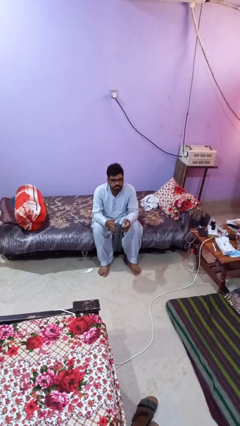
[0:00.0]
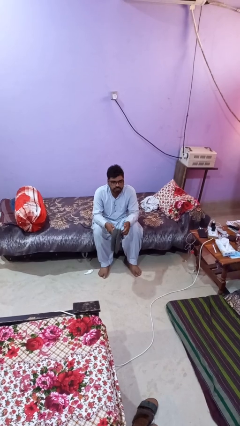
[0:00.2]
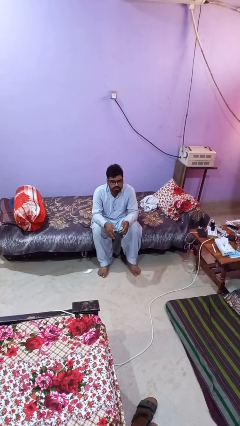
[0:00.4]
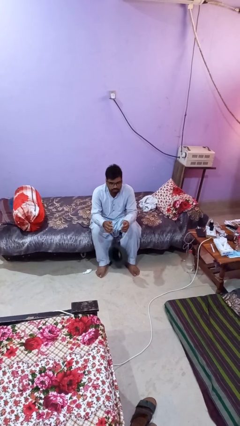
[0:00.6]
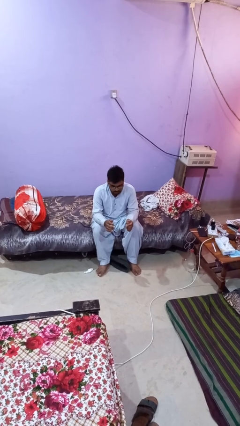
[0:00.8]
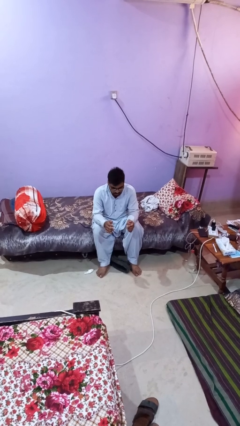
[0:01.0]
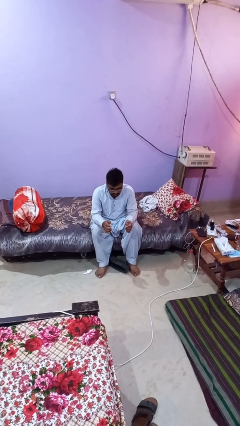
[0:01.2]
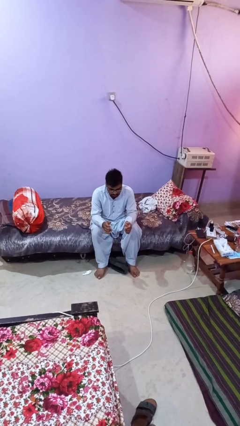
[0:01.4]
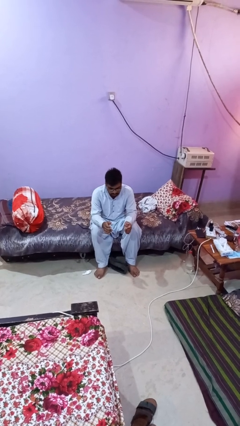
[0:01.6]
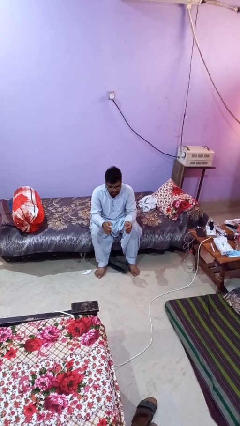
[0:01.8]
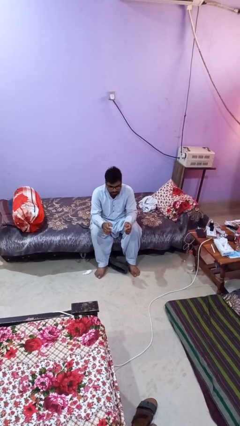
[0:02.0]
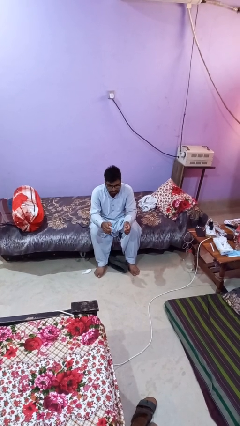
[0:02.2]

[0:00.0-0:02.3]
person drops object

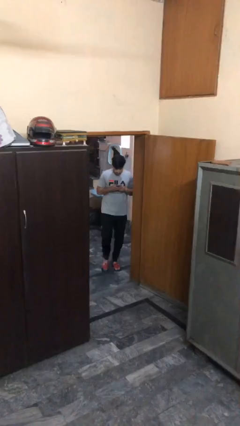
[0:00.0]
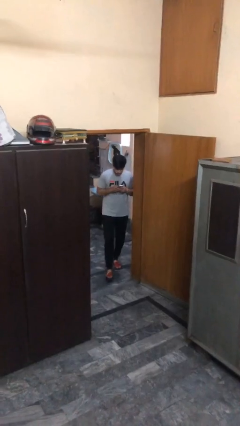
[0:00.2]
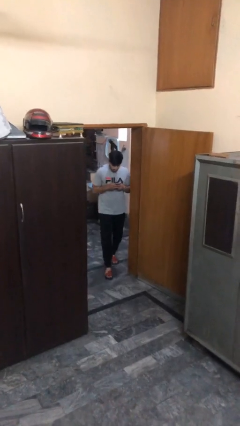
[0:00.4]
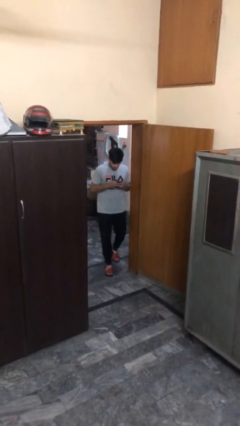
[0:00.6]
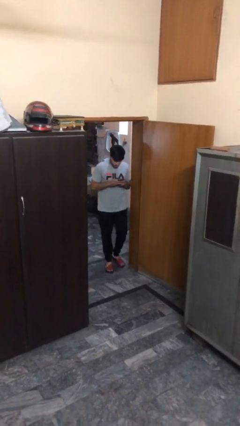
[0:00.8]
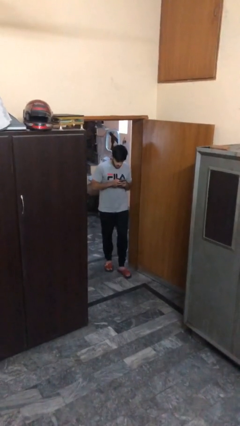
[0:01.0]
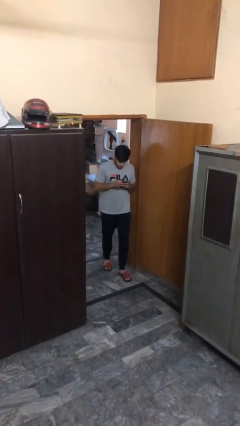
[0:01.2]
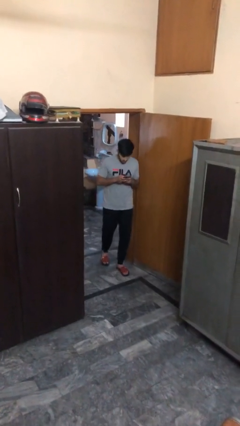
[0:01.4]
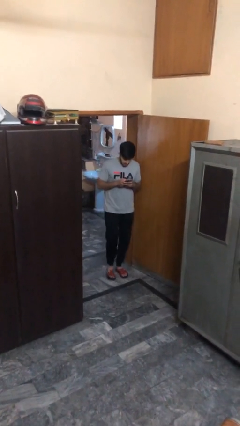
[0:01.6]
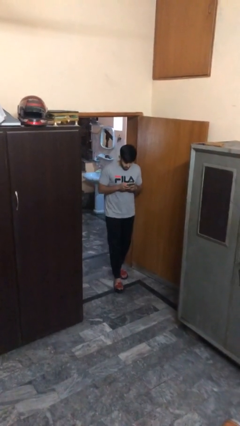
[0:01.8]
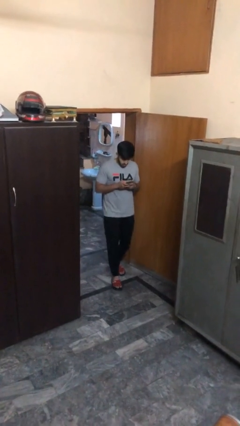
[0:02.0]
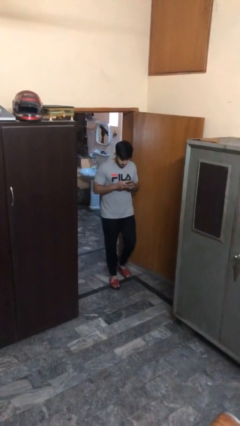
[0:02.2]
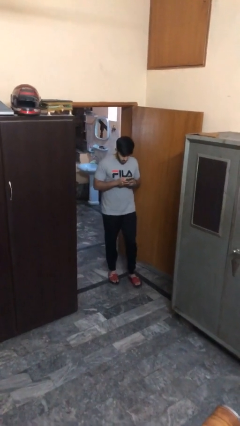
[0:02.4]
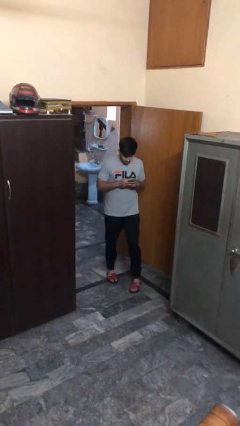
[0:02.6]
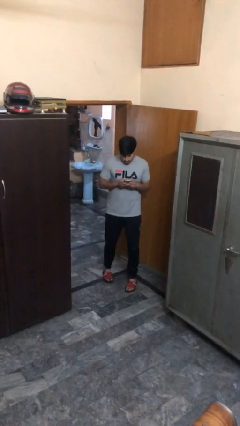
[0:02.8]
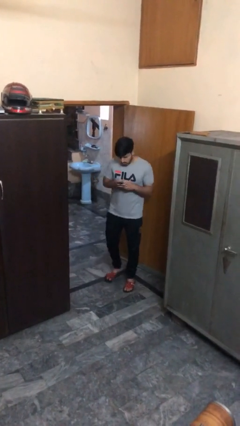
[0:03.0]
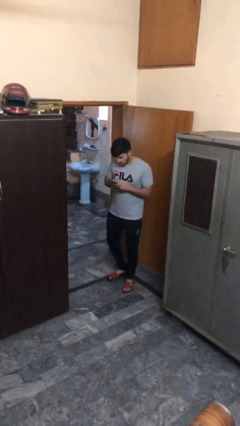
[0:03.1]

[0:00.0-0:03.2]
person enters scene through structure

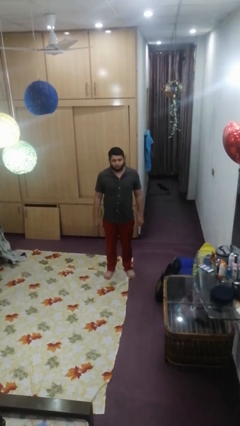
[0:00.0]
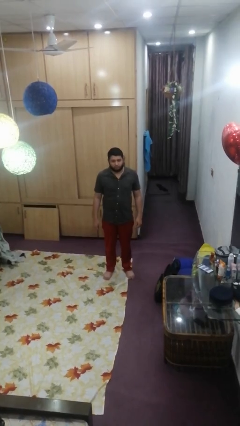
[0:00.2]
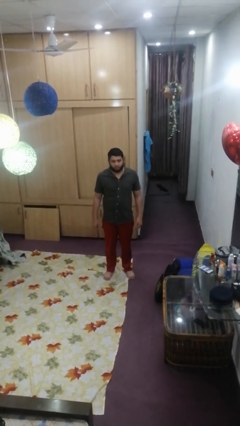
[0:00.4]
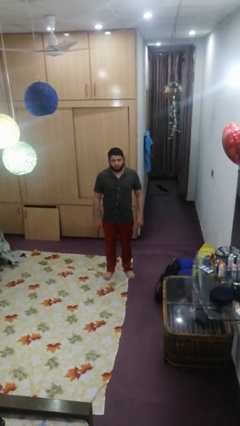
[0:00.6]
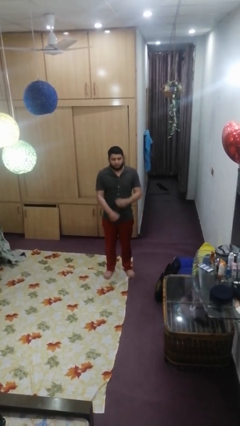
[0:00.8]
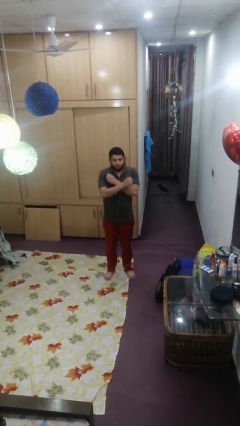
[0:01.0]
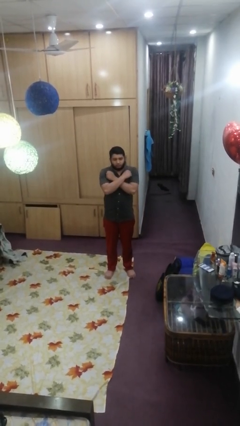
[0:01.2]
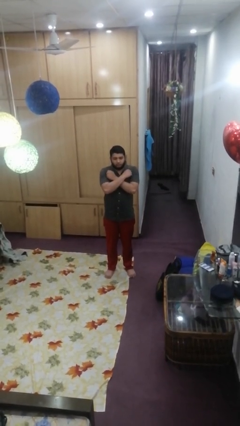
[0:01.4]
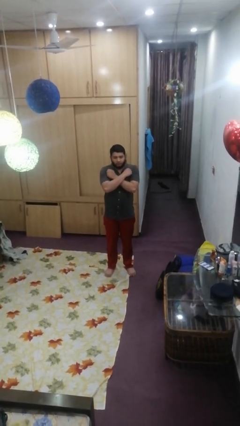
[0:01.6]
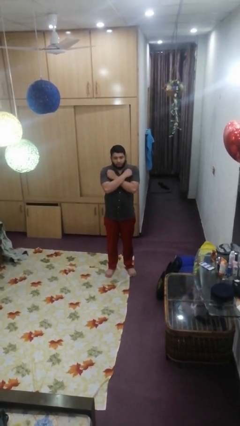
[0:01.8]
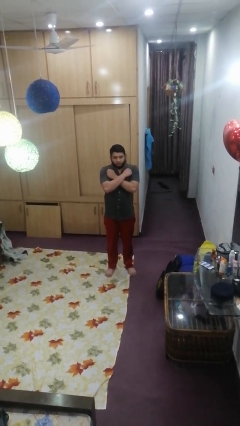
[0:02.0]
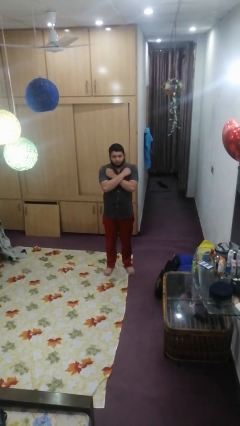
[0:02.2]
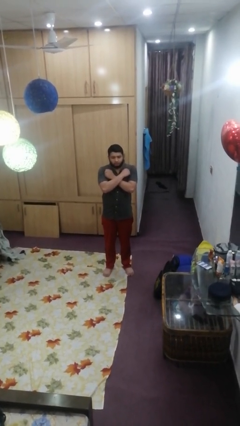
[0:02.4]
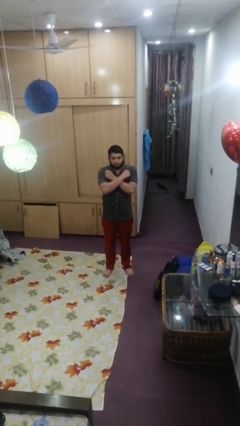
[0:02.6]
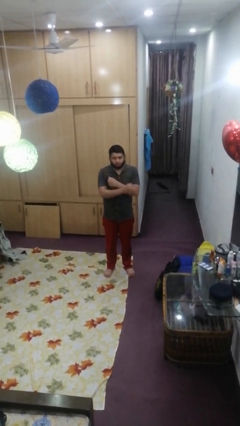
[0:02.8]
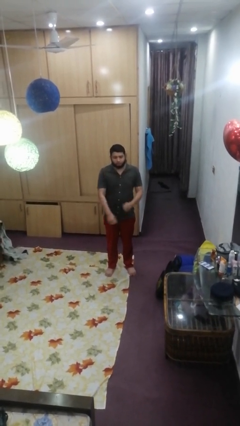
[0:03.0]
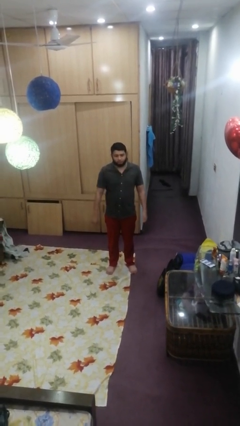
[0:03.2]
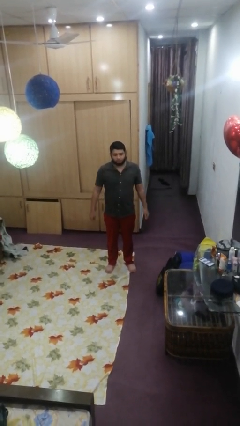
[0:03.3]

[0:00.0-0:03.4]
person crosses arms

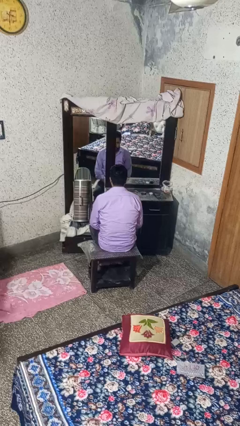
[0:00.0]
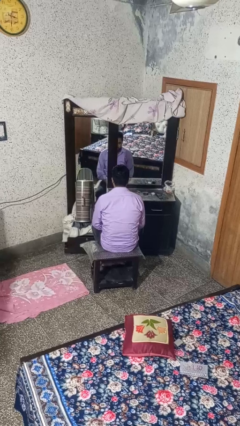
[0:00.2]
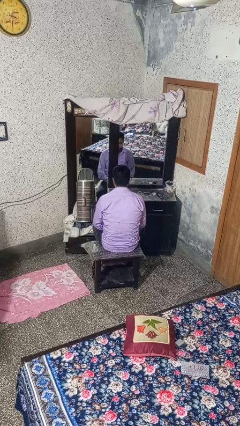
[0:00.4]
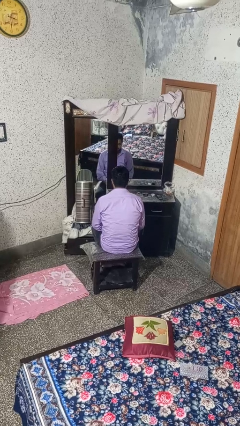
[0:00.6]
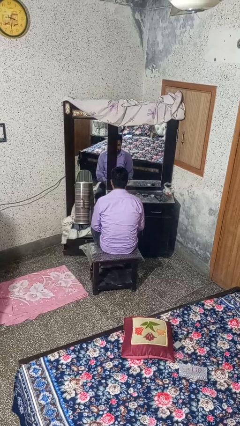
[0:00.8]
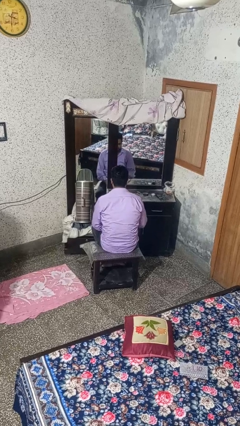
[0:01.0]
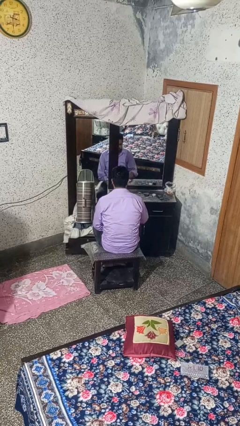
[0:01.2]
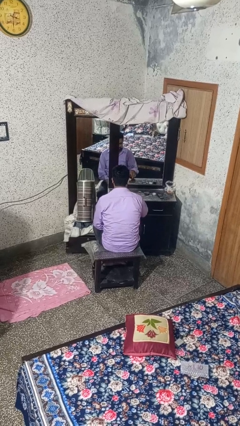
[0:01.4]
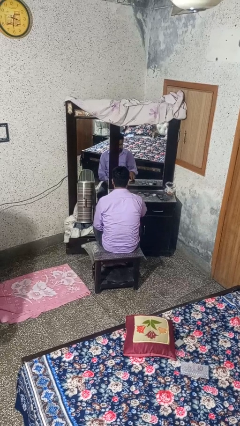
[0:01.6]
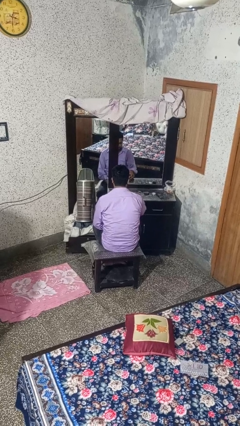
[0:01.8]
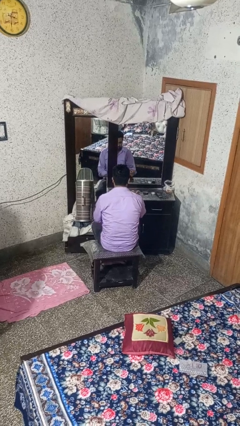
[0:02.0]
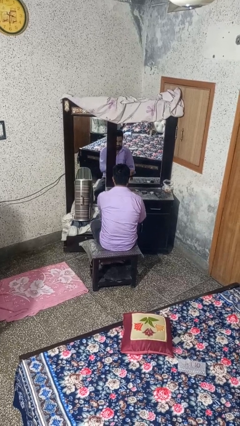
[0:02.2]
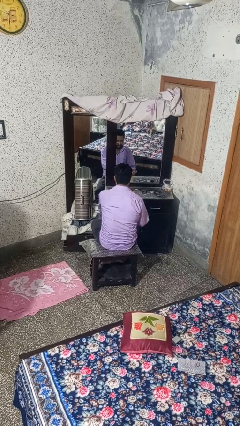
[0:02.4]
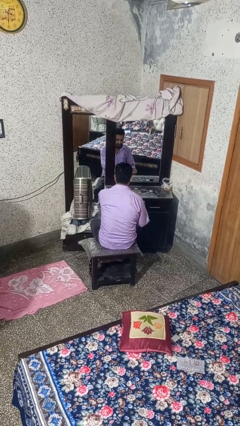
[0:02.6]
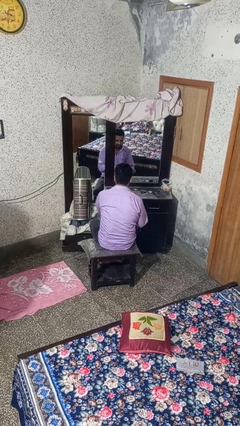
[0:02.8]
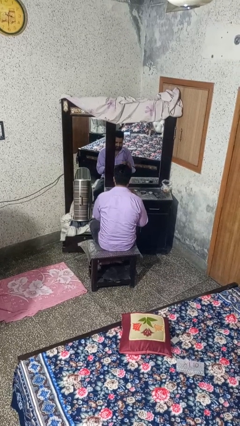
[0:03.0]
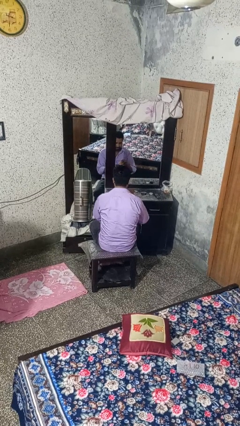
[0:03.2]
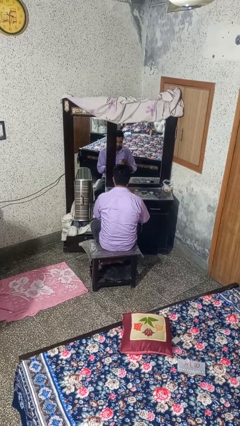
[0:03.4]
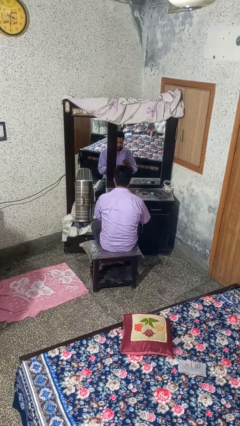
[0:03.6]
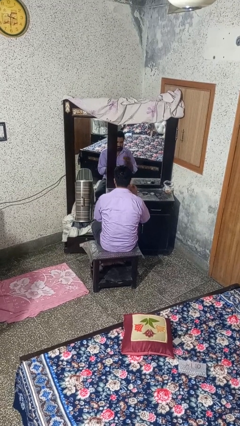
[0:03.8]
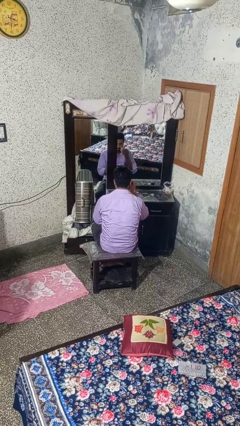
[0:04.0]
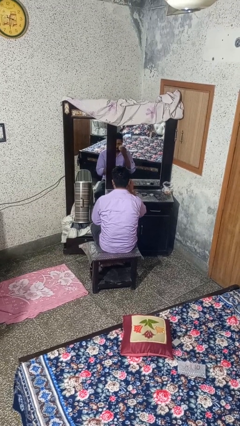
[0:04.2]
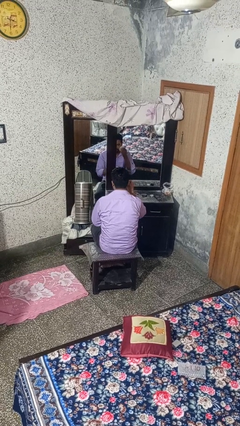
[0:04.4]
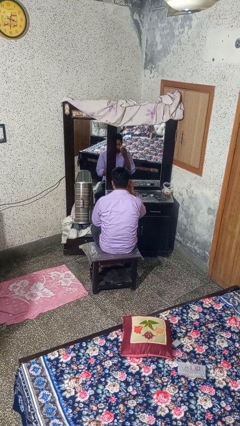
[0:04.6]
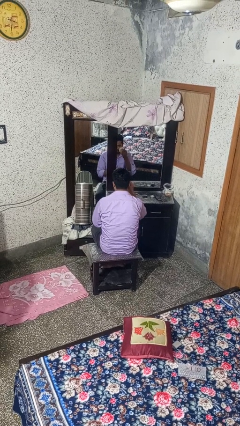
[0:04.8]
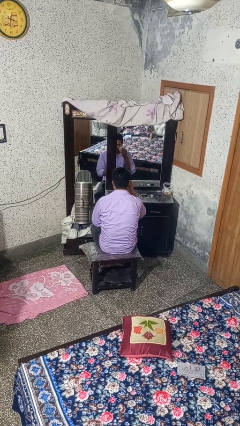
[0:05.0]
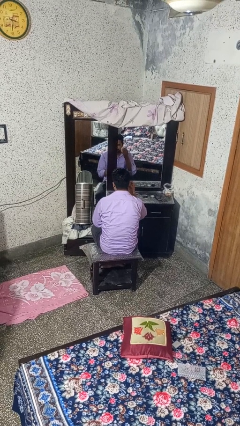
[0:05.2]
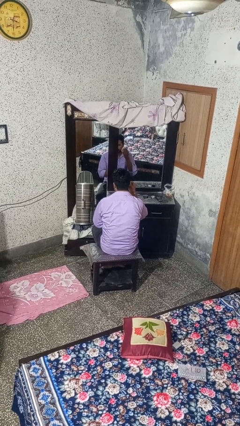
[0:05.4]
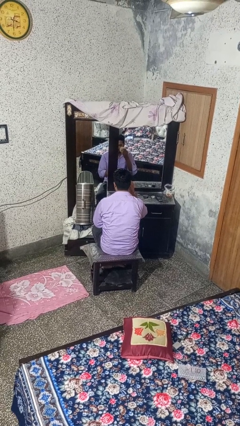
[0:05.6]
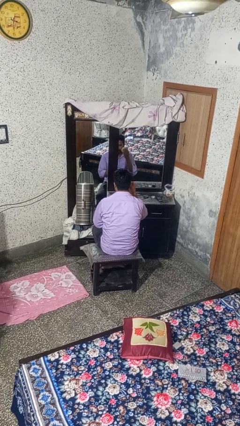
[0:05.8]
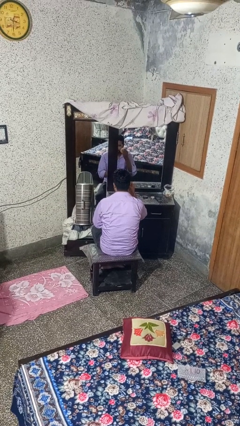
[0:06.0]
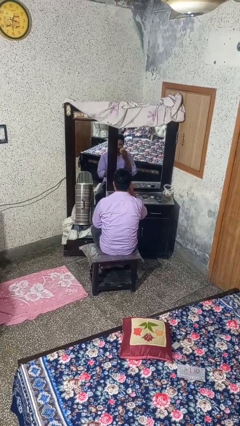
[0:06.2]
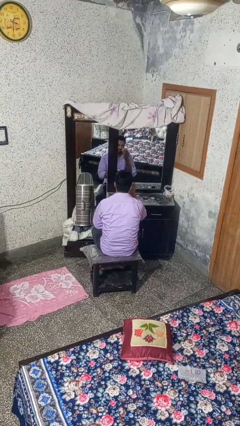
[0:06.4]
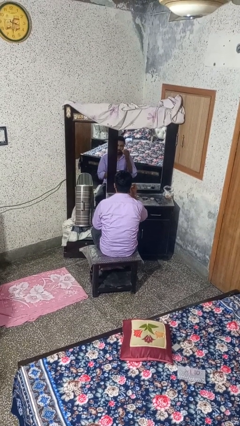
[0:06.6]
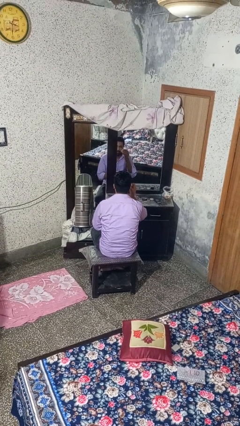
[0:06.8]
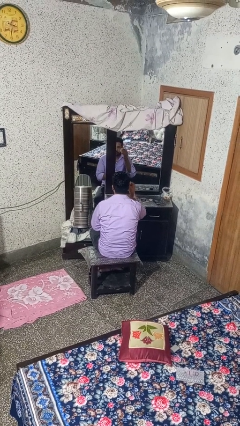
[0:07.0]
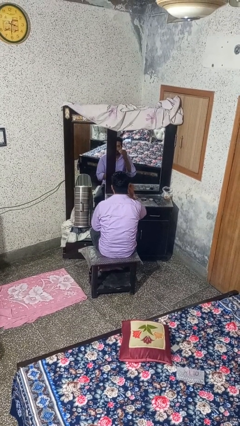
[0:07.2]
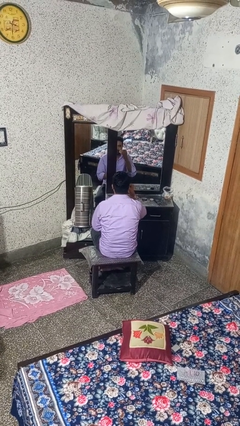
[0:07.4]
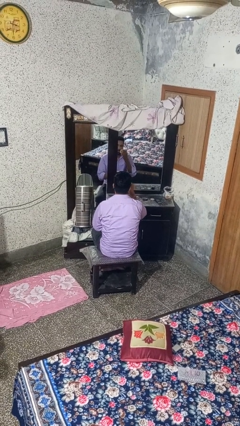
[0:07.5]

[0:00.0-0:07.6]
person applies foundation makeup

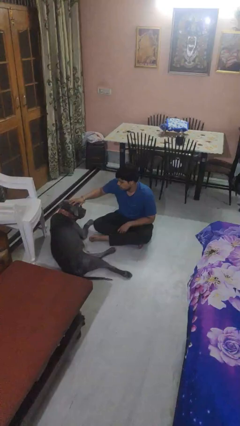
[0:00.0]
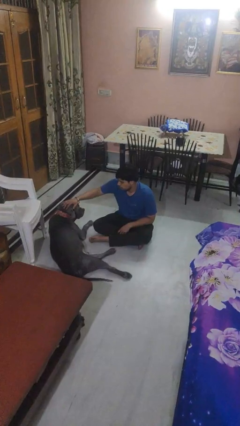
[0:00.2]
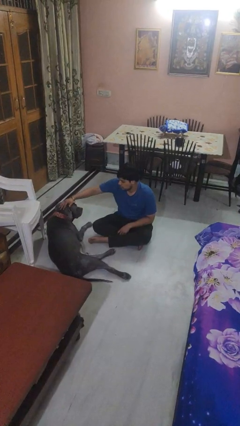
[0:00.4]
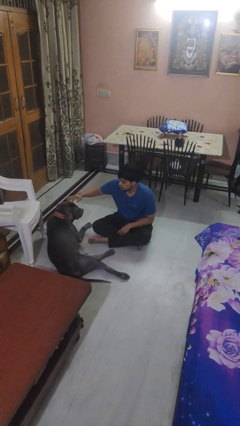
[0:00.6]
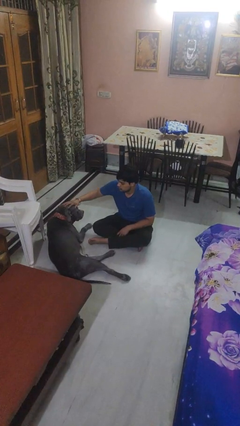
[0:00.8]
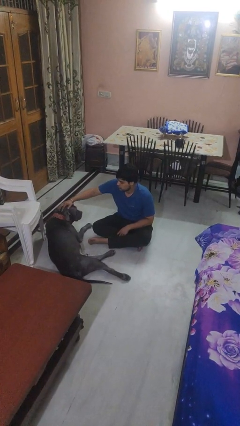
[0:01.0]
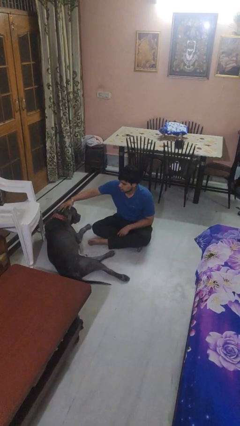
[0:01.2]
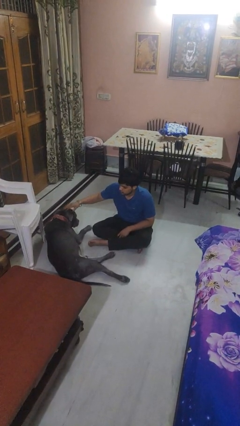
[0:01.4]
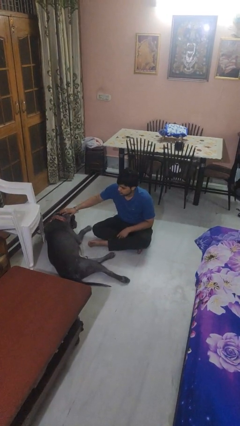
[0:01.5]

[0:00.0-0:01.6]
person pets dog
